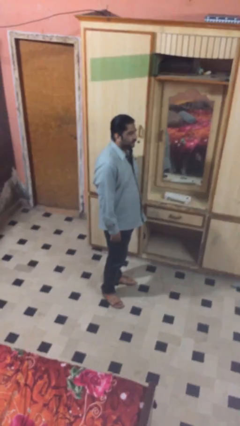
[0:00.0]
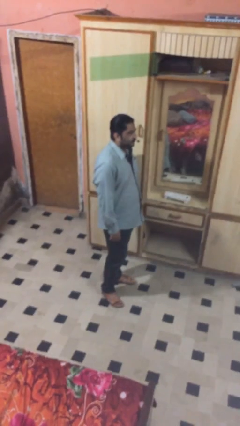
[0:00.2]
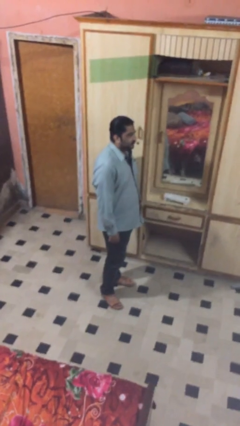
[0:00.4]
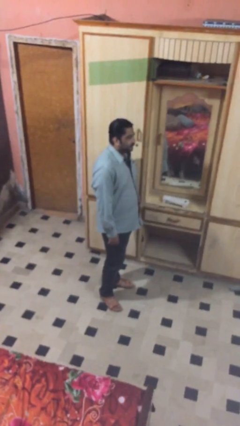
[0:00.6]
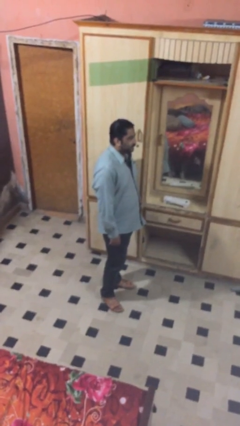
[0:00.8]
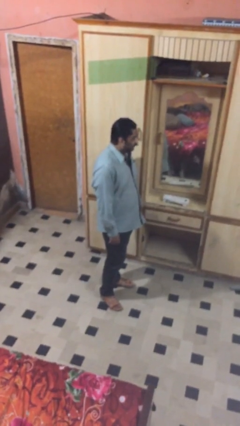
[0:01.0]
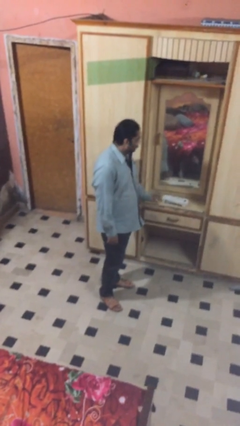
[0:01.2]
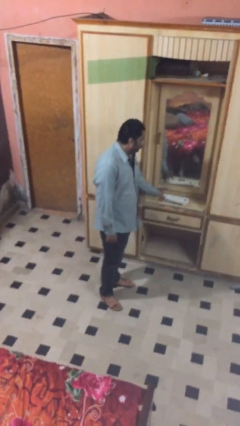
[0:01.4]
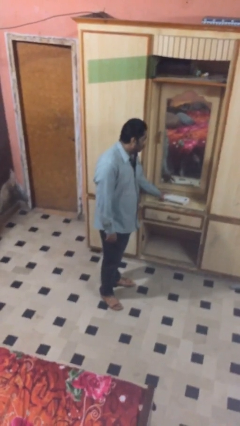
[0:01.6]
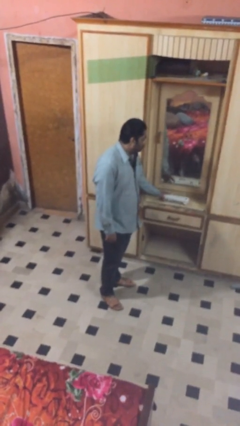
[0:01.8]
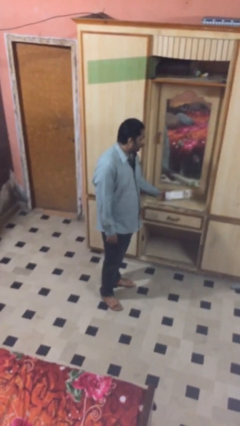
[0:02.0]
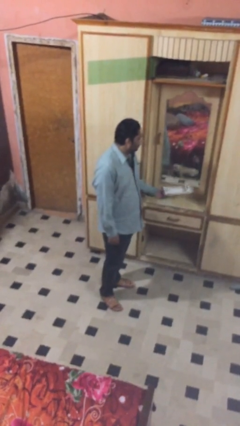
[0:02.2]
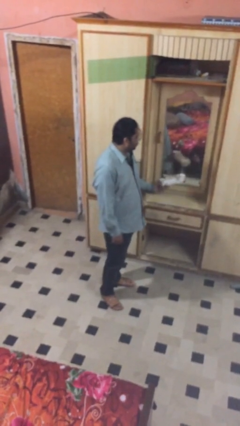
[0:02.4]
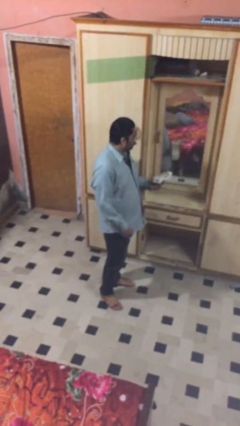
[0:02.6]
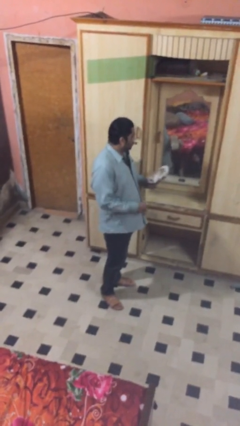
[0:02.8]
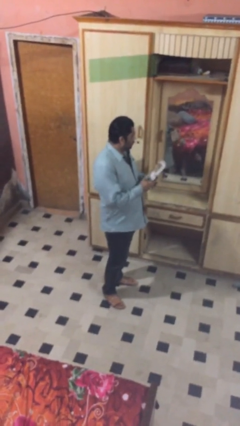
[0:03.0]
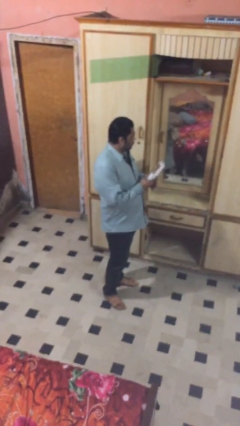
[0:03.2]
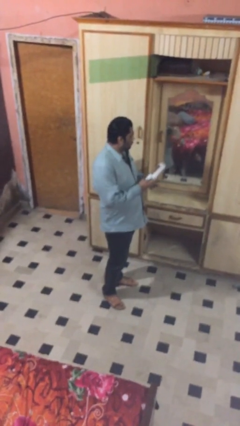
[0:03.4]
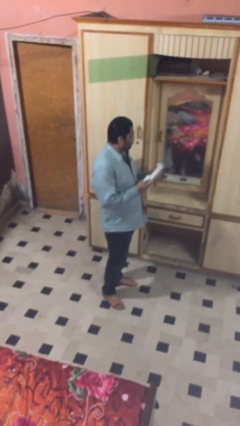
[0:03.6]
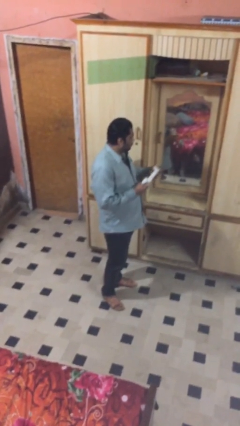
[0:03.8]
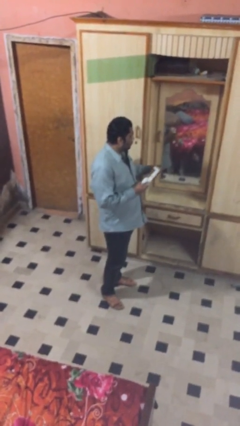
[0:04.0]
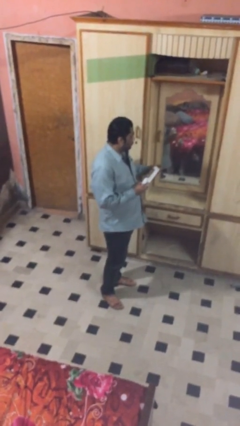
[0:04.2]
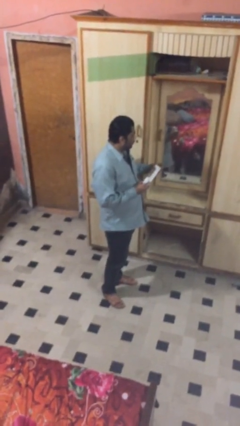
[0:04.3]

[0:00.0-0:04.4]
person picks up object from table

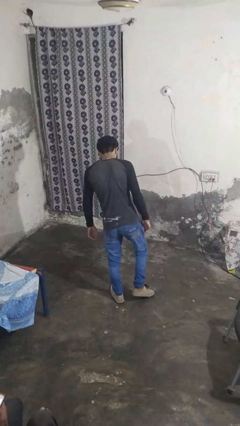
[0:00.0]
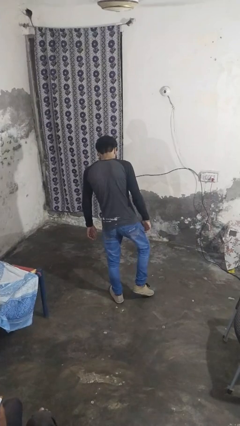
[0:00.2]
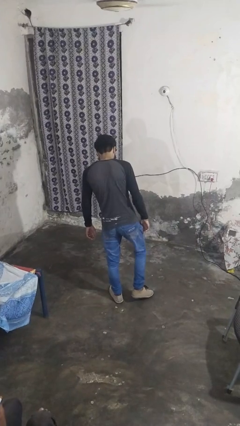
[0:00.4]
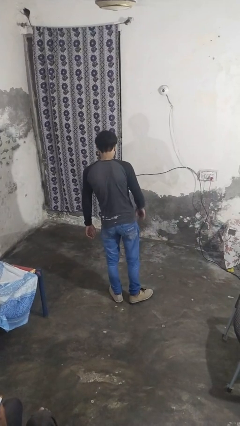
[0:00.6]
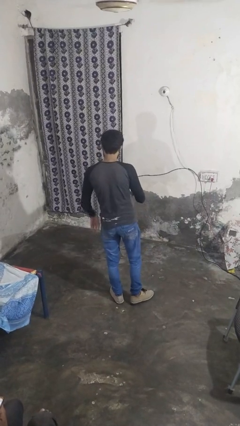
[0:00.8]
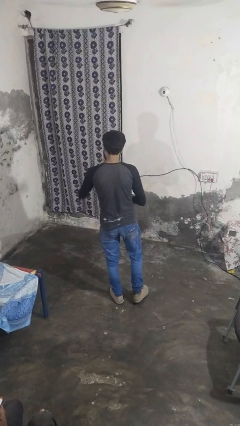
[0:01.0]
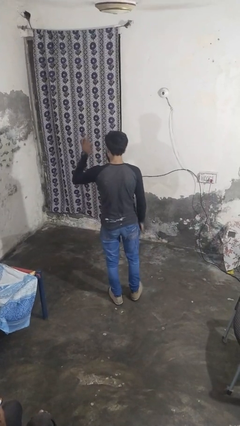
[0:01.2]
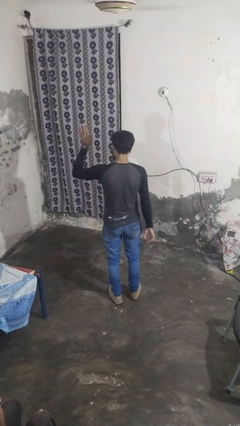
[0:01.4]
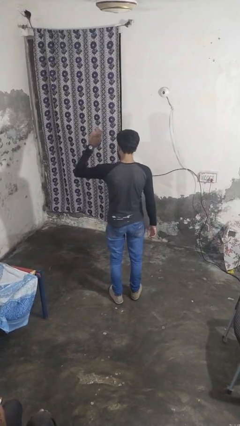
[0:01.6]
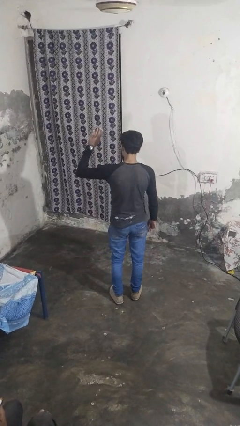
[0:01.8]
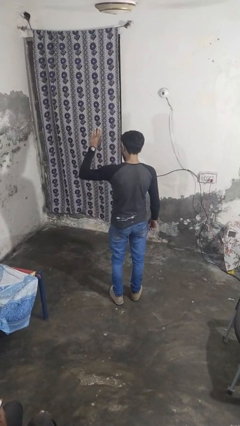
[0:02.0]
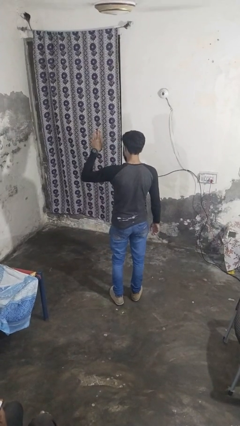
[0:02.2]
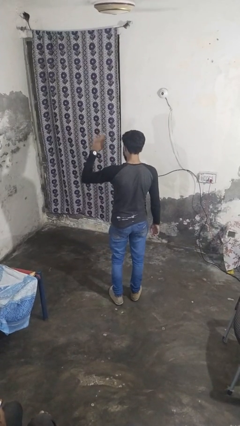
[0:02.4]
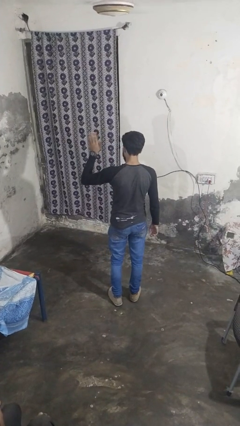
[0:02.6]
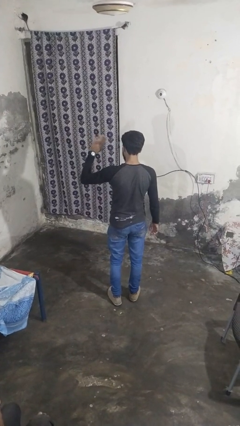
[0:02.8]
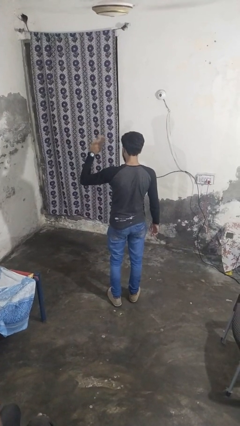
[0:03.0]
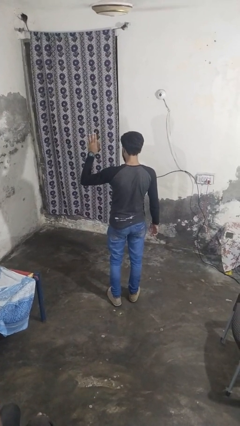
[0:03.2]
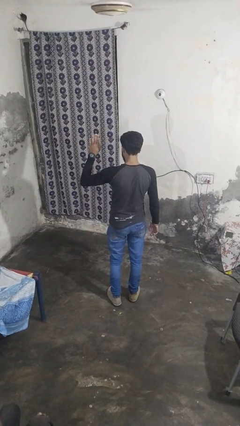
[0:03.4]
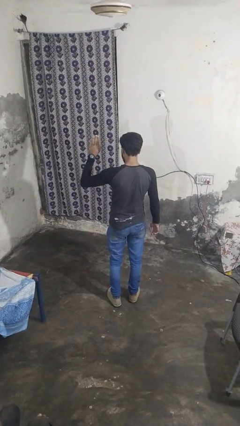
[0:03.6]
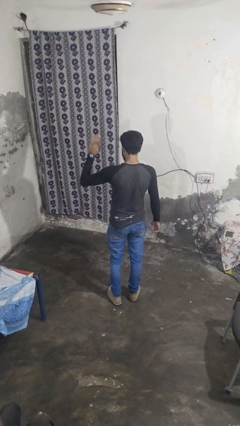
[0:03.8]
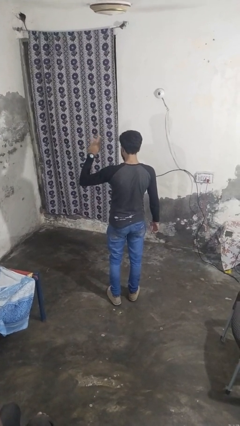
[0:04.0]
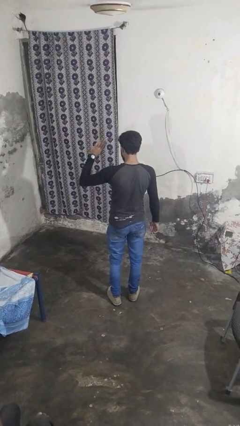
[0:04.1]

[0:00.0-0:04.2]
person waves at person

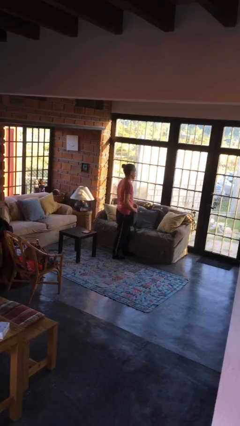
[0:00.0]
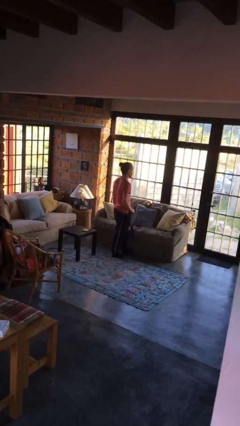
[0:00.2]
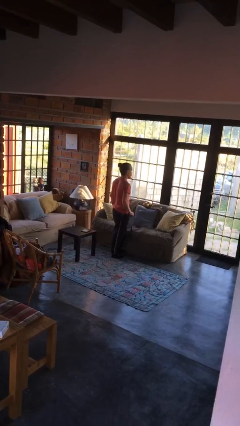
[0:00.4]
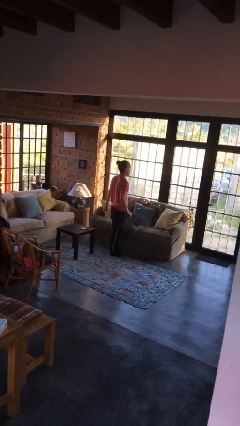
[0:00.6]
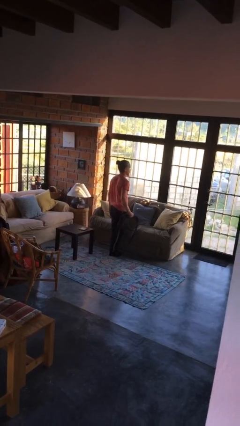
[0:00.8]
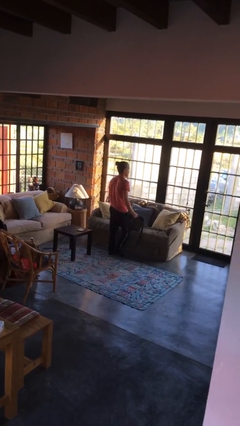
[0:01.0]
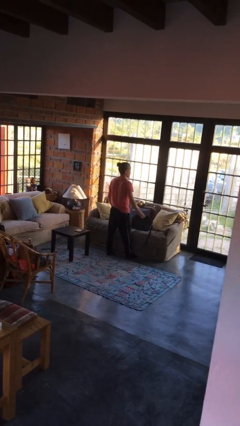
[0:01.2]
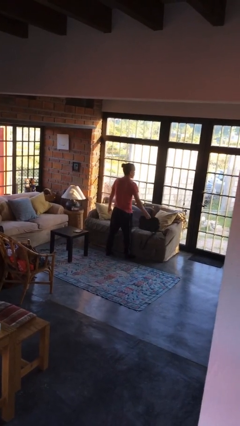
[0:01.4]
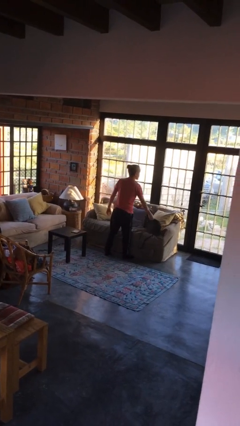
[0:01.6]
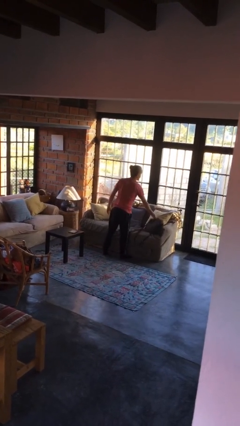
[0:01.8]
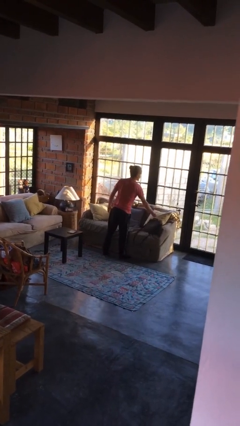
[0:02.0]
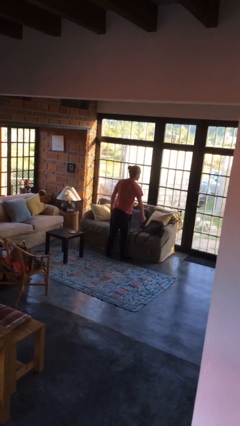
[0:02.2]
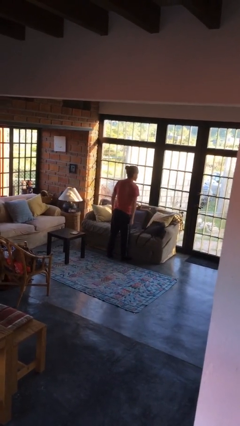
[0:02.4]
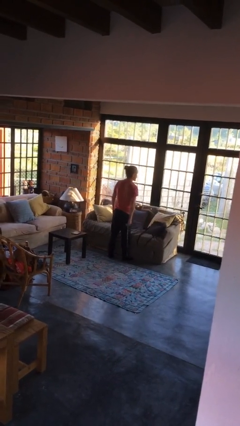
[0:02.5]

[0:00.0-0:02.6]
person puts down object on couch

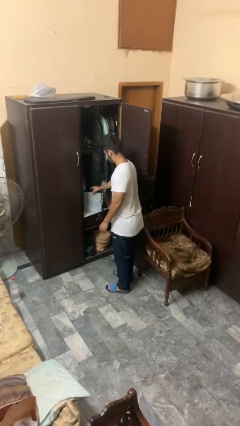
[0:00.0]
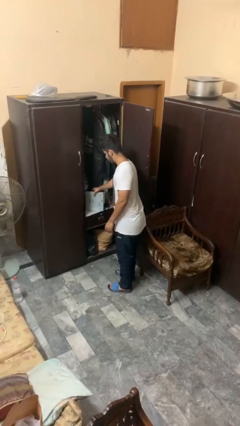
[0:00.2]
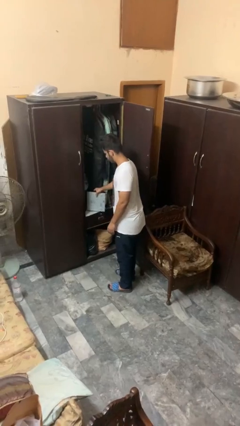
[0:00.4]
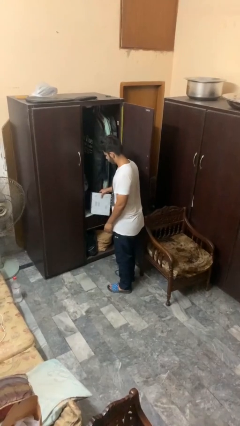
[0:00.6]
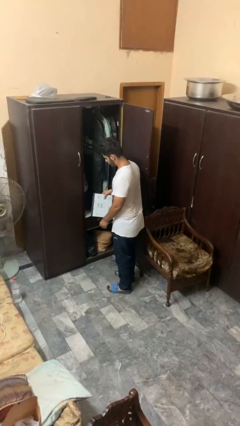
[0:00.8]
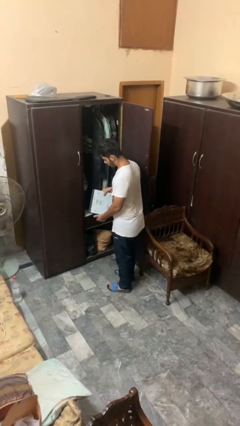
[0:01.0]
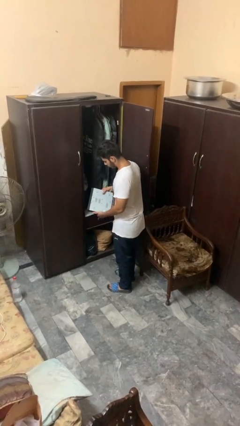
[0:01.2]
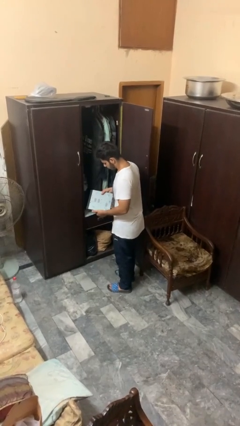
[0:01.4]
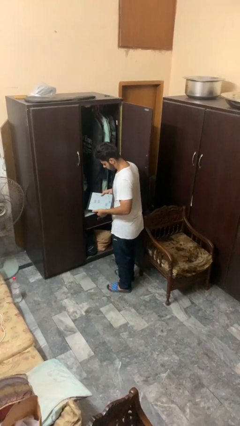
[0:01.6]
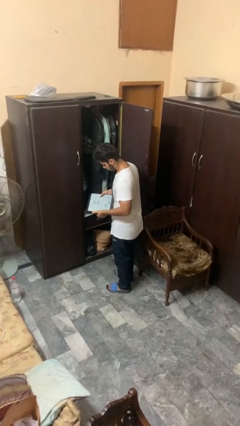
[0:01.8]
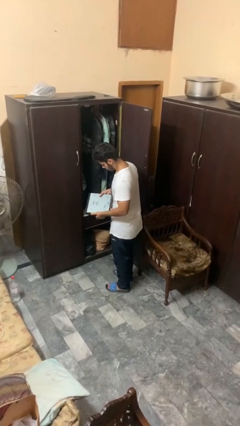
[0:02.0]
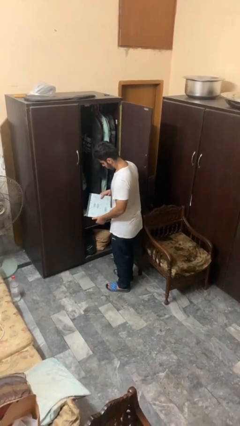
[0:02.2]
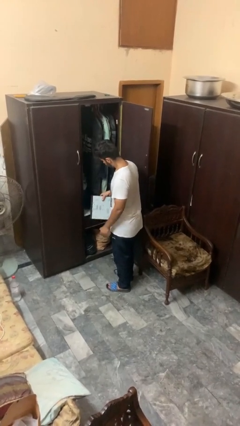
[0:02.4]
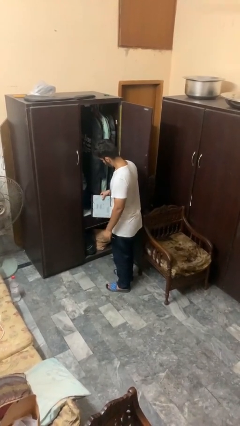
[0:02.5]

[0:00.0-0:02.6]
person picks up object from cabinet

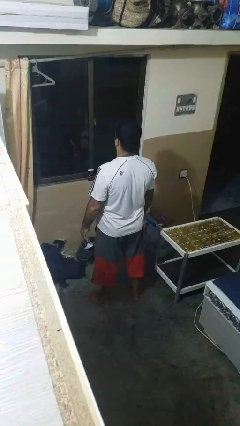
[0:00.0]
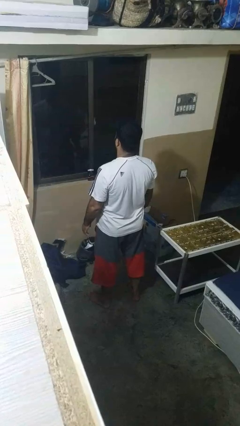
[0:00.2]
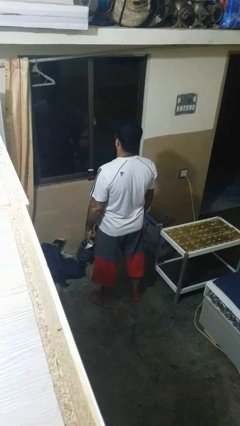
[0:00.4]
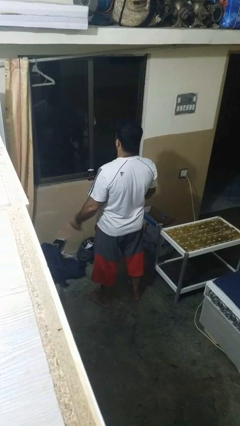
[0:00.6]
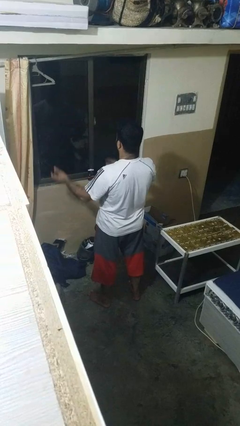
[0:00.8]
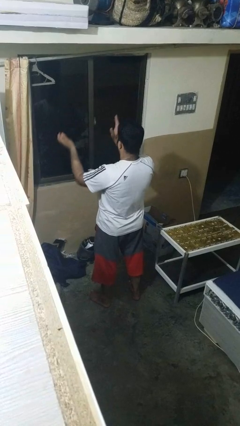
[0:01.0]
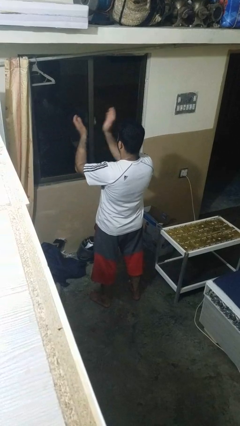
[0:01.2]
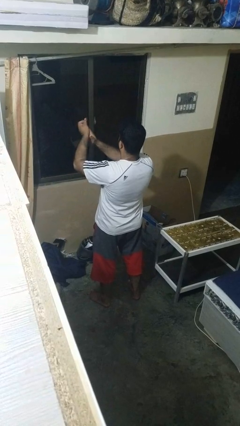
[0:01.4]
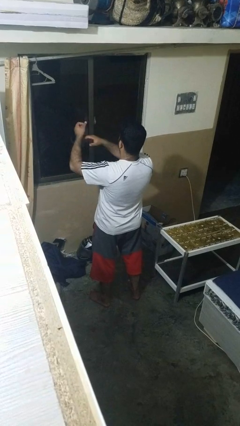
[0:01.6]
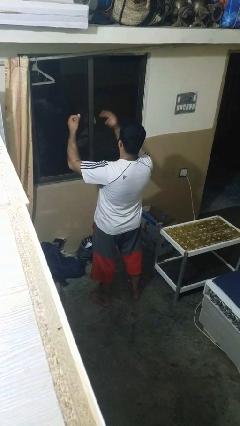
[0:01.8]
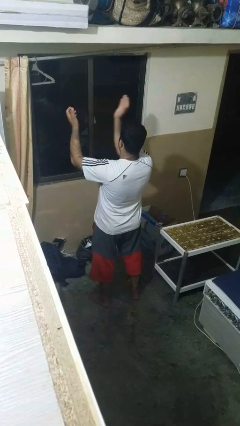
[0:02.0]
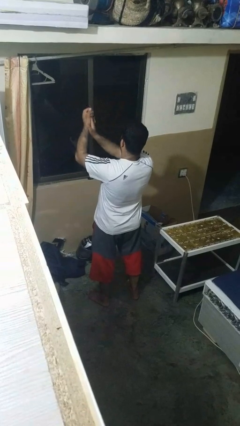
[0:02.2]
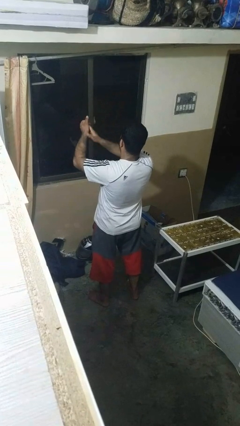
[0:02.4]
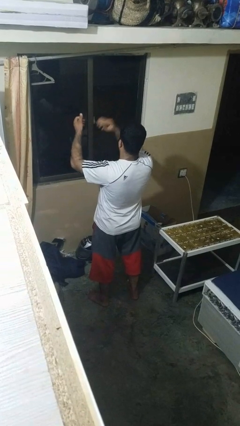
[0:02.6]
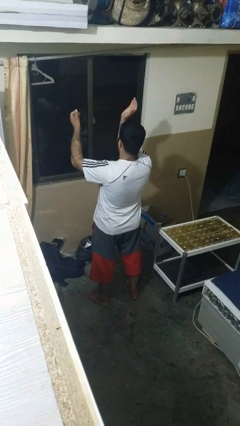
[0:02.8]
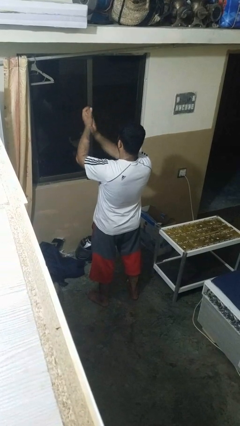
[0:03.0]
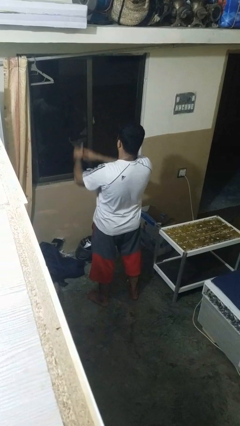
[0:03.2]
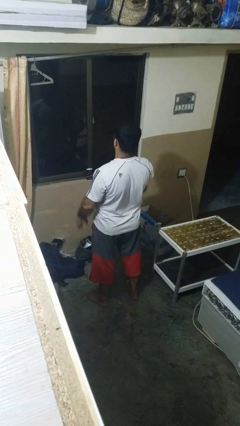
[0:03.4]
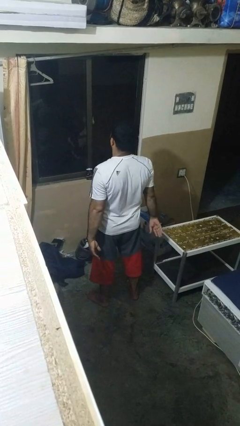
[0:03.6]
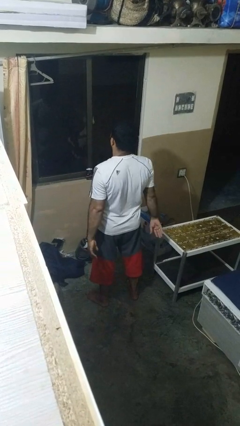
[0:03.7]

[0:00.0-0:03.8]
person claps hands
